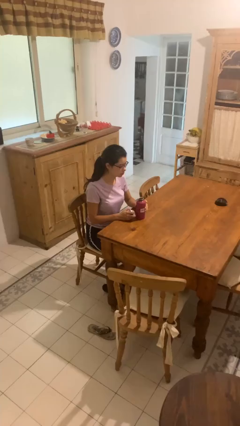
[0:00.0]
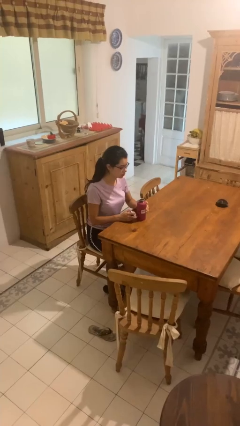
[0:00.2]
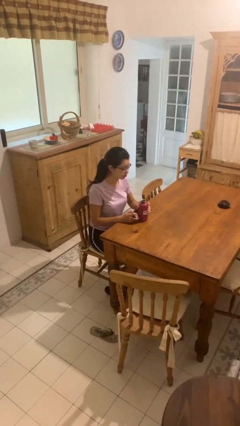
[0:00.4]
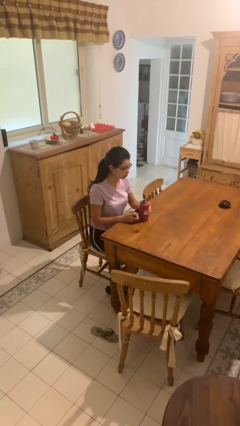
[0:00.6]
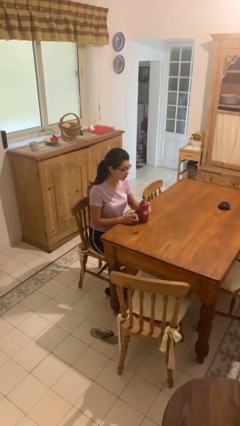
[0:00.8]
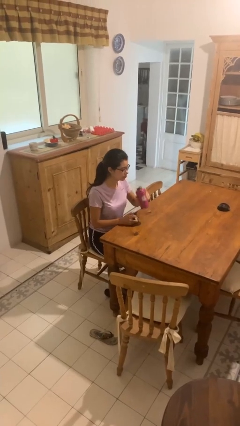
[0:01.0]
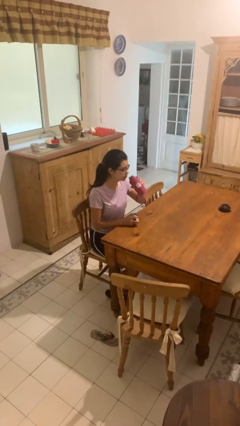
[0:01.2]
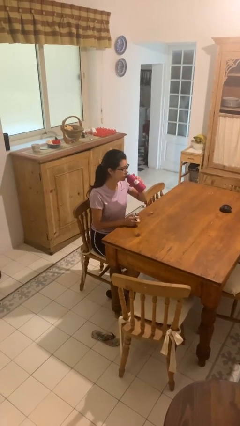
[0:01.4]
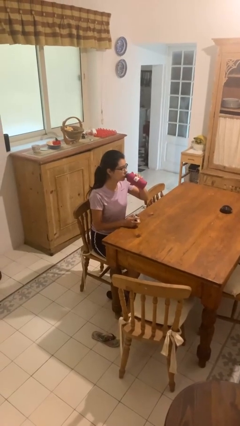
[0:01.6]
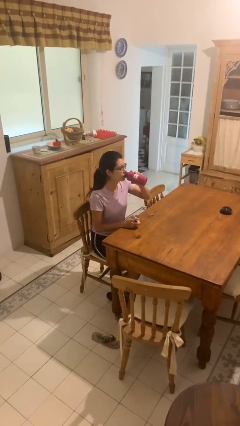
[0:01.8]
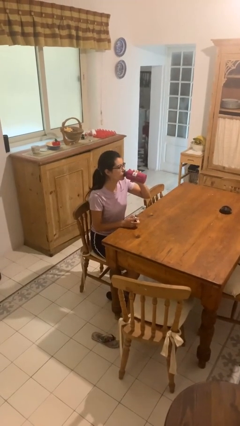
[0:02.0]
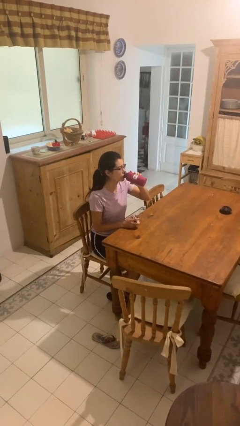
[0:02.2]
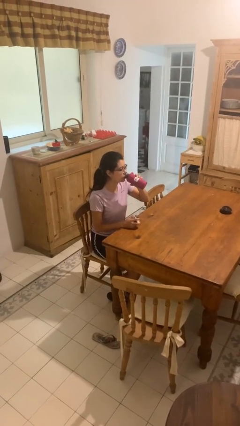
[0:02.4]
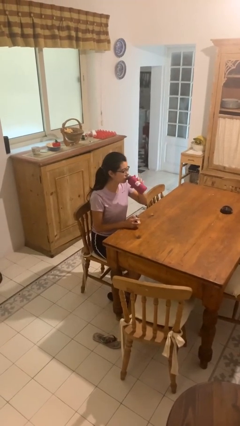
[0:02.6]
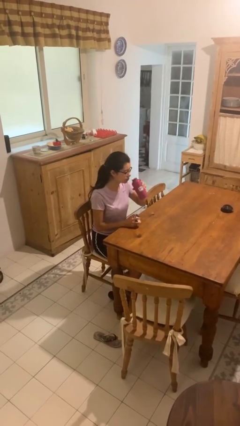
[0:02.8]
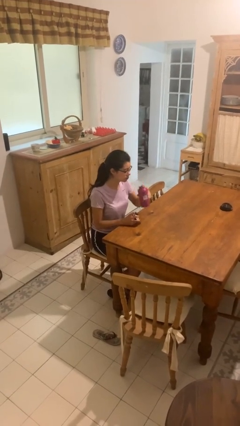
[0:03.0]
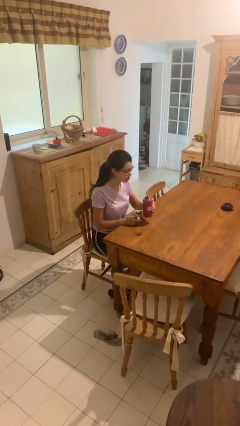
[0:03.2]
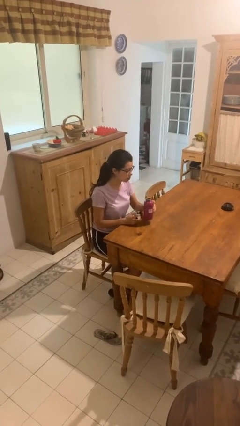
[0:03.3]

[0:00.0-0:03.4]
person drinks from bottle

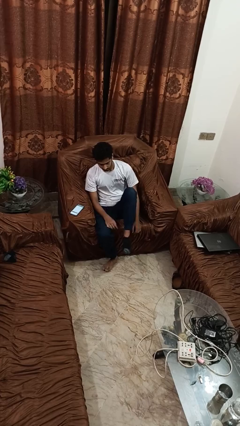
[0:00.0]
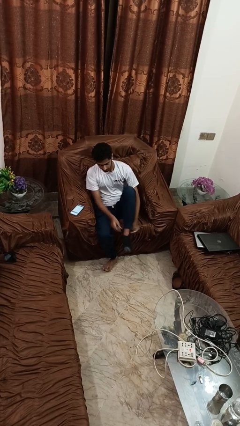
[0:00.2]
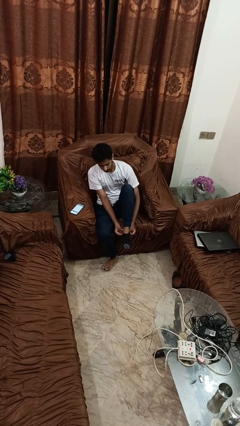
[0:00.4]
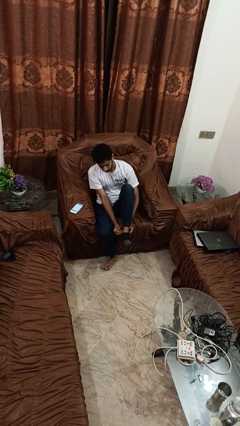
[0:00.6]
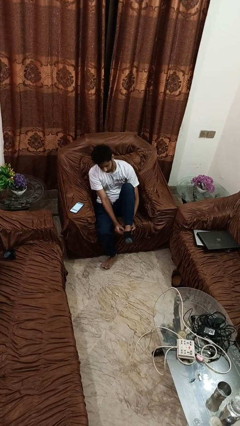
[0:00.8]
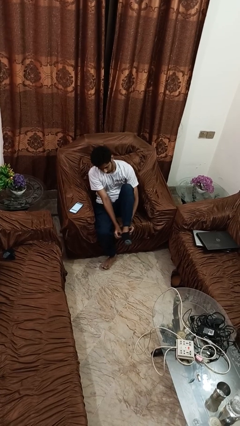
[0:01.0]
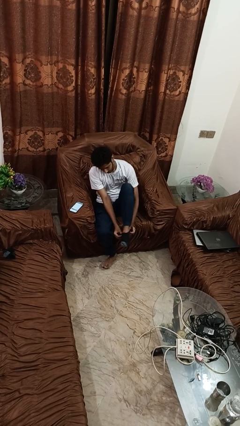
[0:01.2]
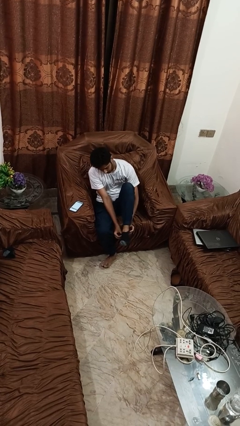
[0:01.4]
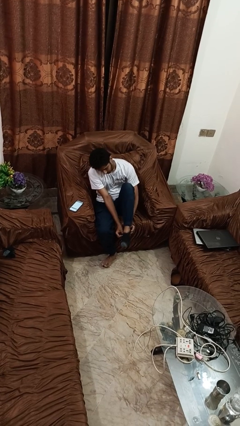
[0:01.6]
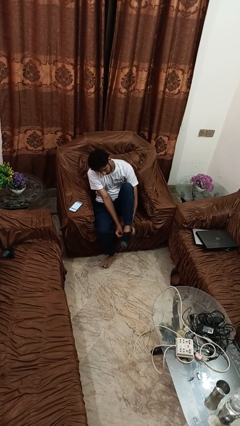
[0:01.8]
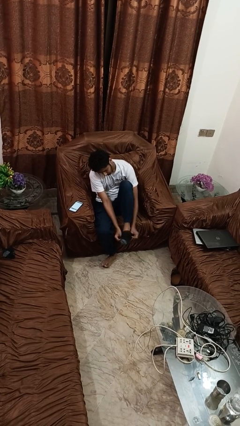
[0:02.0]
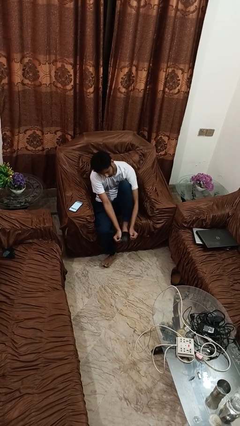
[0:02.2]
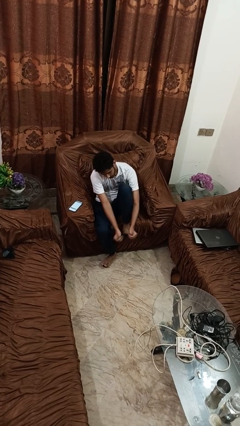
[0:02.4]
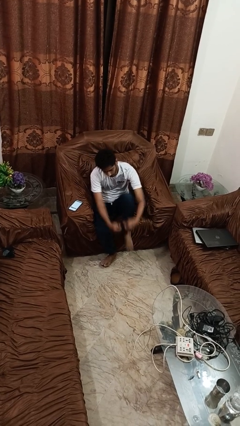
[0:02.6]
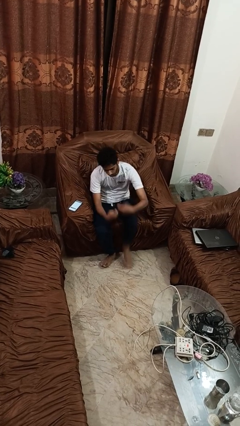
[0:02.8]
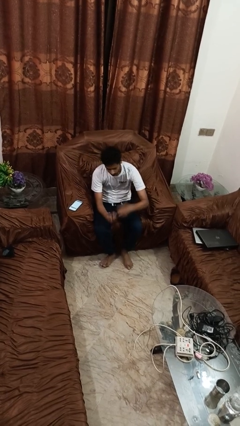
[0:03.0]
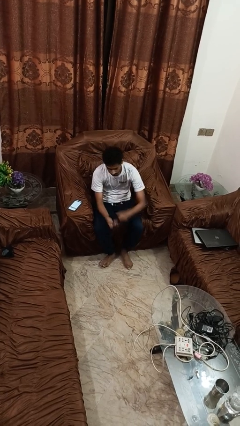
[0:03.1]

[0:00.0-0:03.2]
person takes off socks

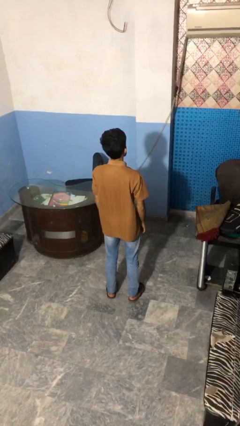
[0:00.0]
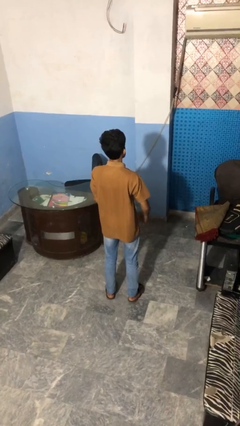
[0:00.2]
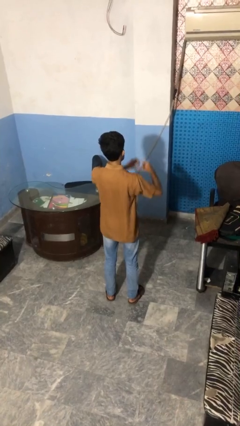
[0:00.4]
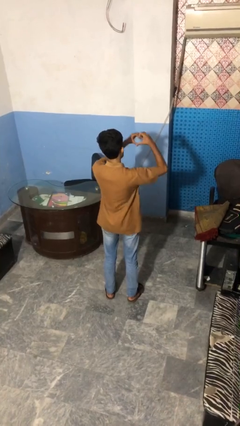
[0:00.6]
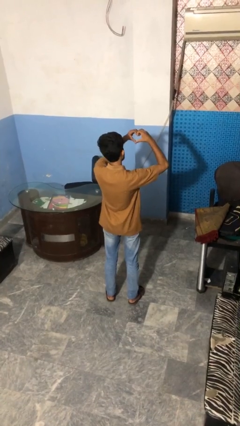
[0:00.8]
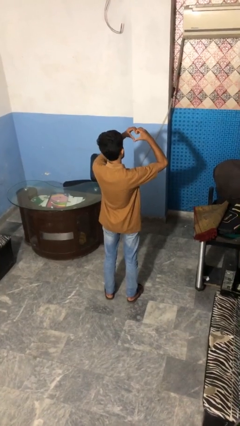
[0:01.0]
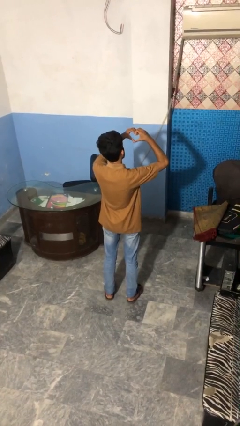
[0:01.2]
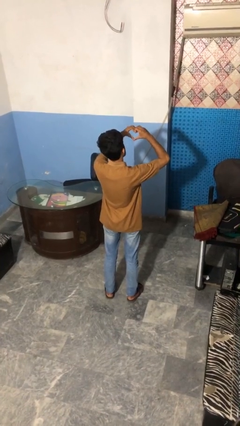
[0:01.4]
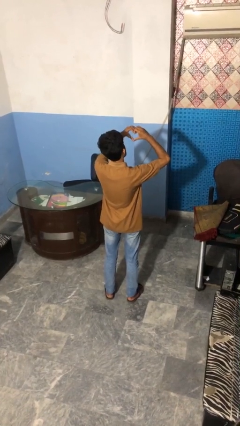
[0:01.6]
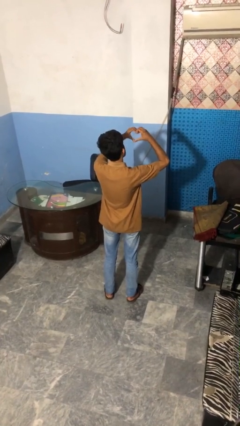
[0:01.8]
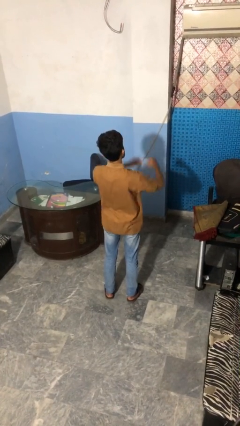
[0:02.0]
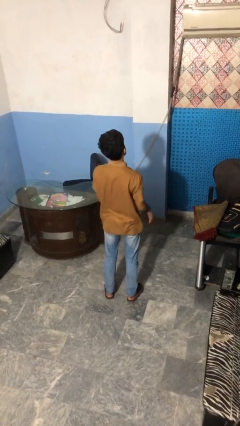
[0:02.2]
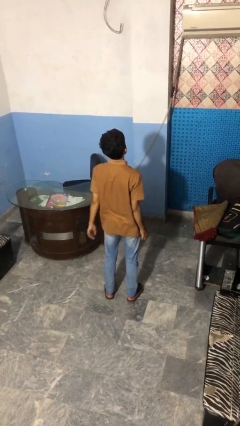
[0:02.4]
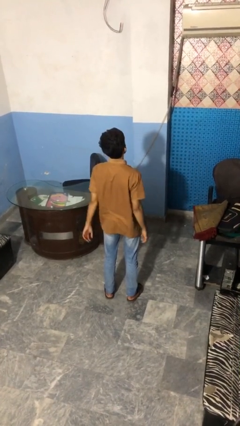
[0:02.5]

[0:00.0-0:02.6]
person gestures heart

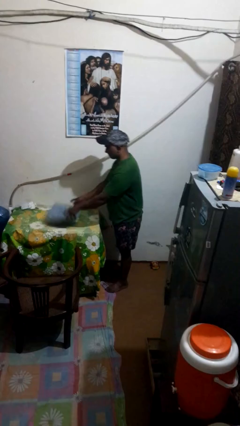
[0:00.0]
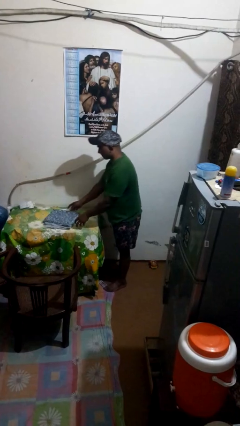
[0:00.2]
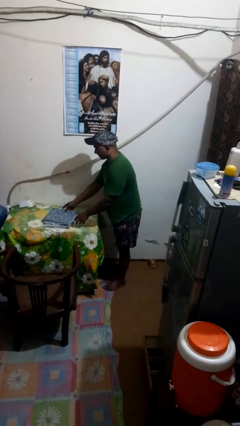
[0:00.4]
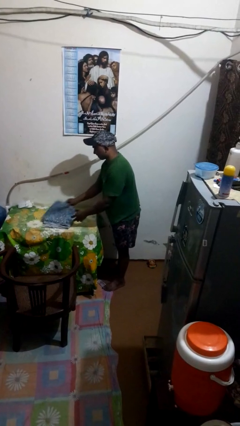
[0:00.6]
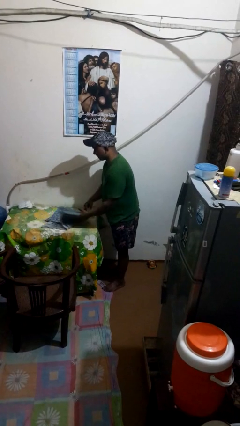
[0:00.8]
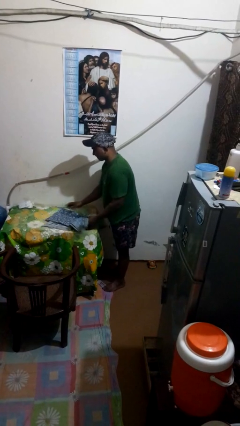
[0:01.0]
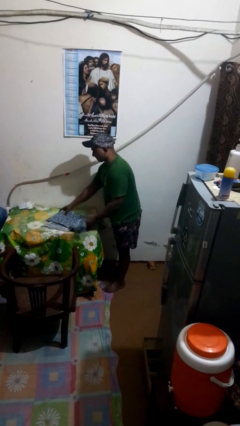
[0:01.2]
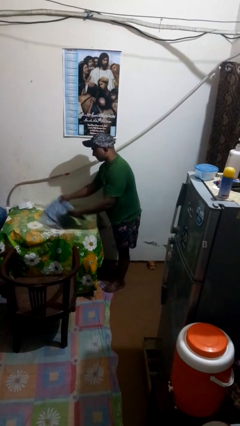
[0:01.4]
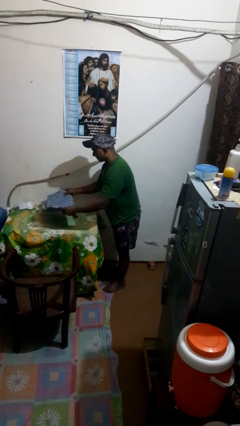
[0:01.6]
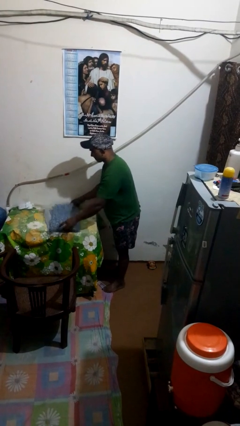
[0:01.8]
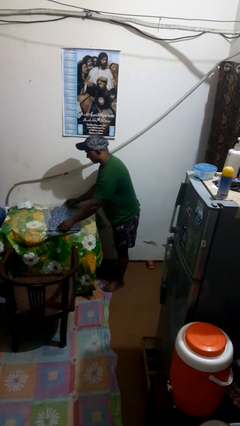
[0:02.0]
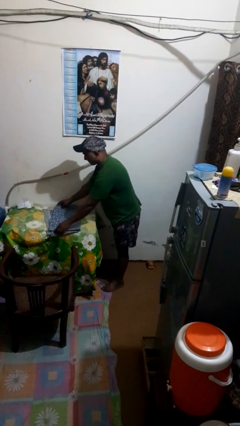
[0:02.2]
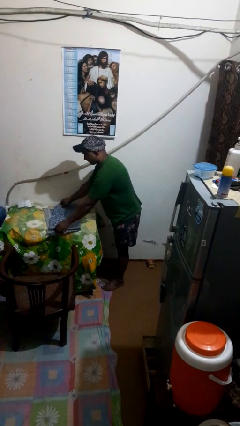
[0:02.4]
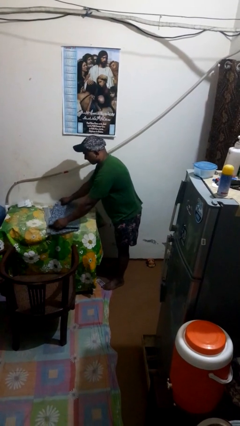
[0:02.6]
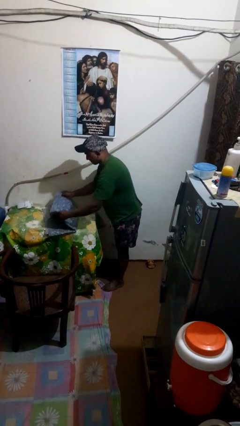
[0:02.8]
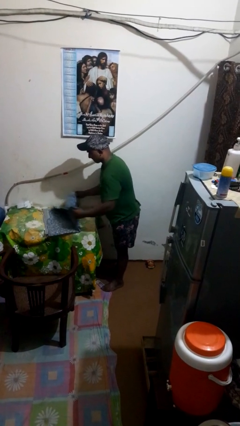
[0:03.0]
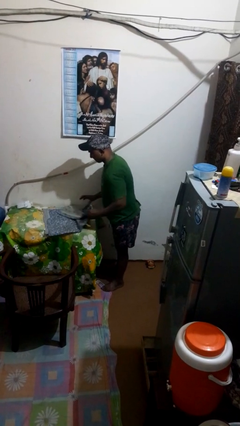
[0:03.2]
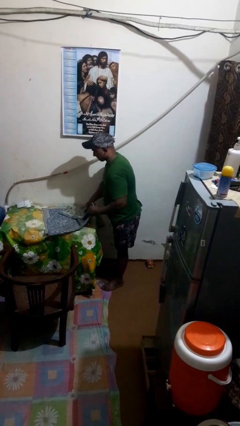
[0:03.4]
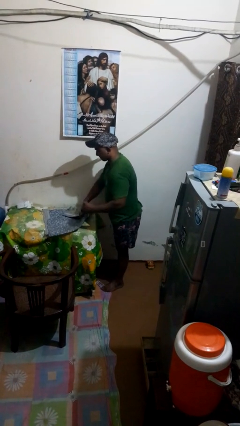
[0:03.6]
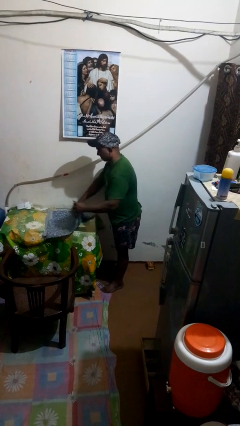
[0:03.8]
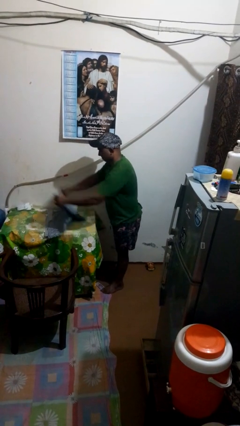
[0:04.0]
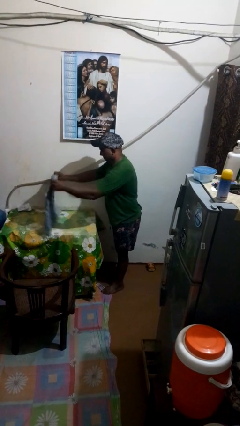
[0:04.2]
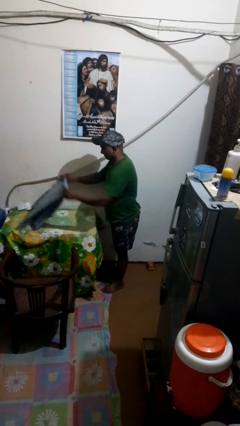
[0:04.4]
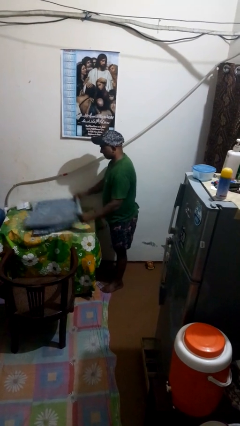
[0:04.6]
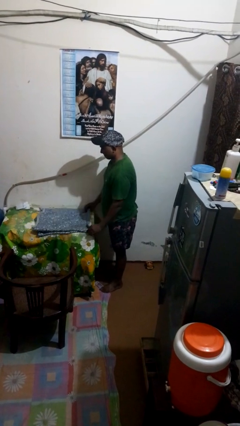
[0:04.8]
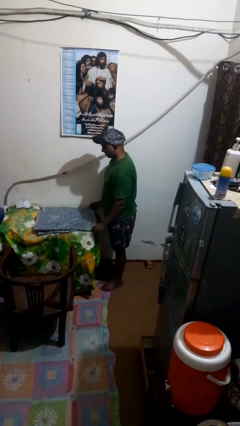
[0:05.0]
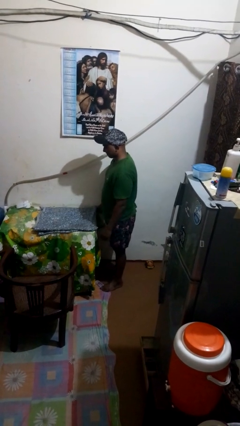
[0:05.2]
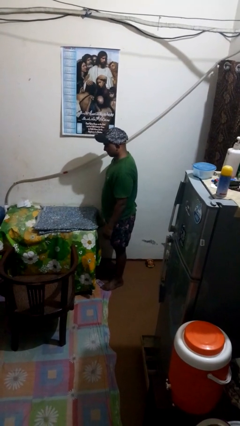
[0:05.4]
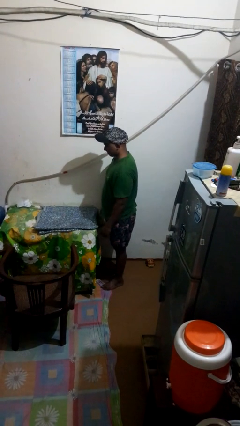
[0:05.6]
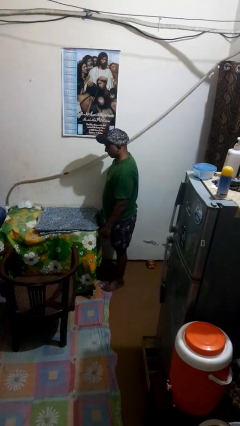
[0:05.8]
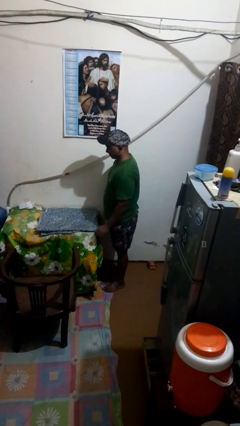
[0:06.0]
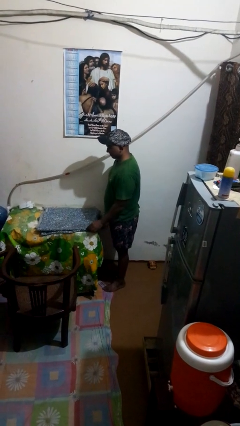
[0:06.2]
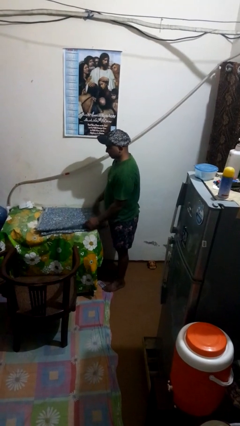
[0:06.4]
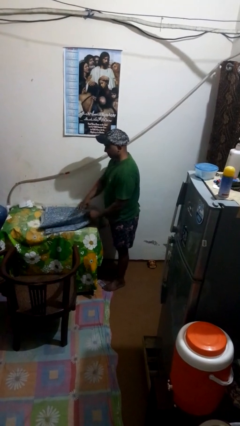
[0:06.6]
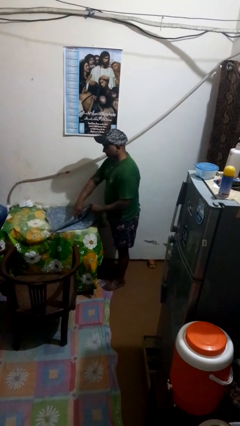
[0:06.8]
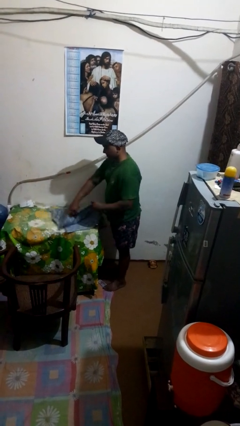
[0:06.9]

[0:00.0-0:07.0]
person spreads tablecloth

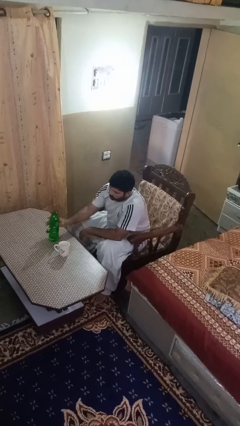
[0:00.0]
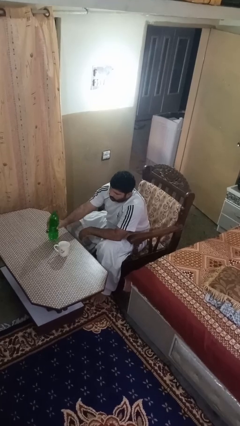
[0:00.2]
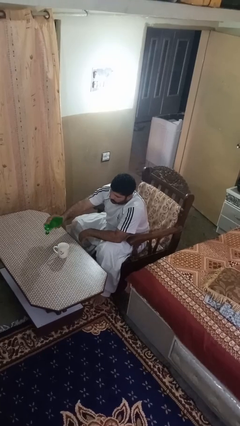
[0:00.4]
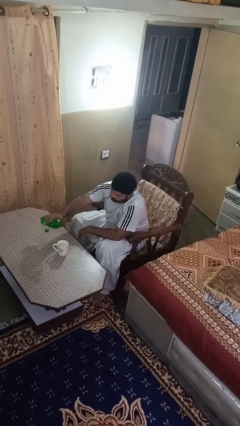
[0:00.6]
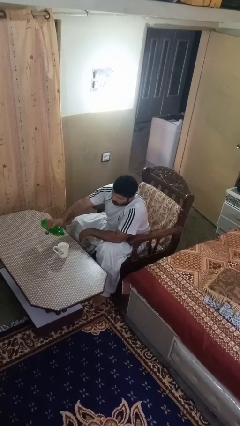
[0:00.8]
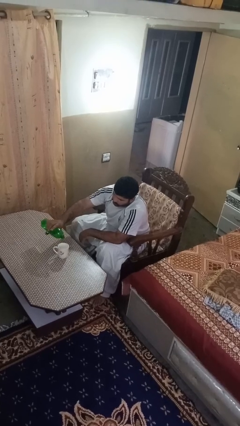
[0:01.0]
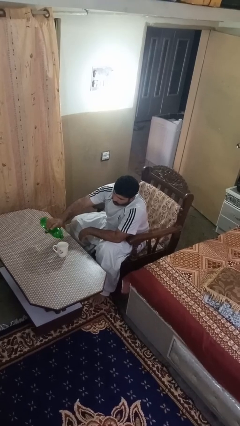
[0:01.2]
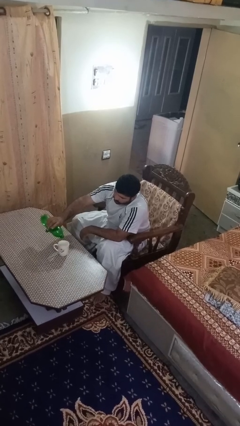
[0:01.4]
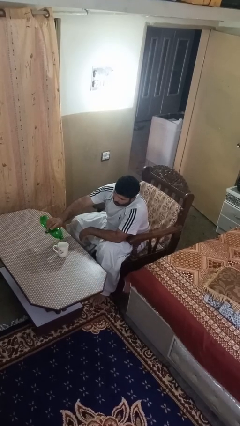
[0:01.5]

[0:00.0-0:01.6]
person pours liquid into cup
